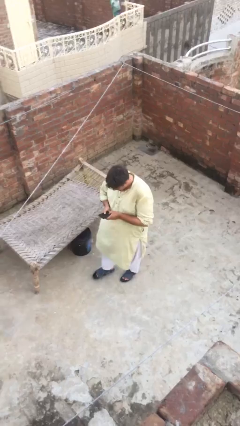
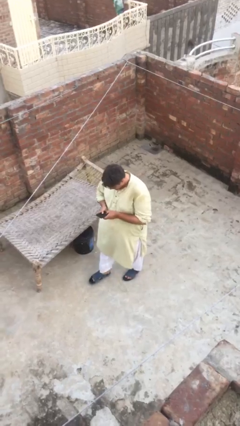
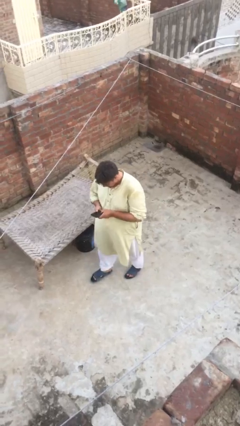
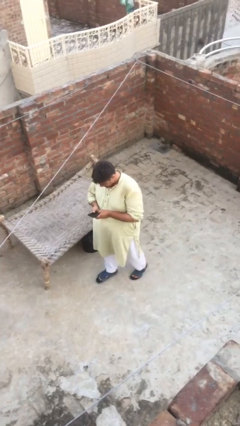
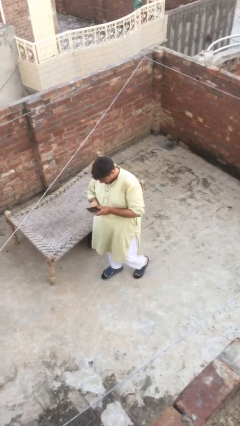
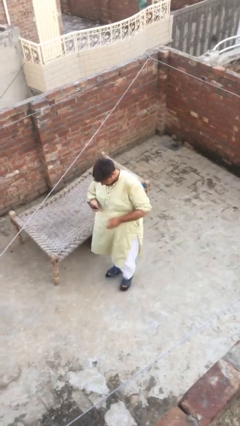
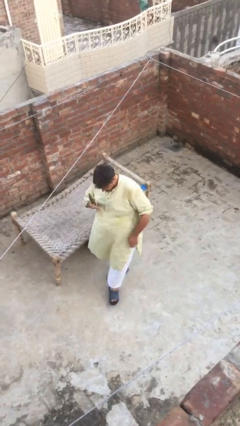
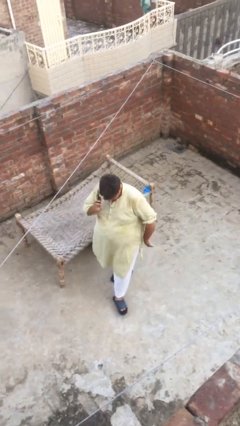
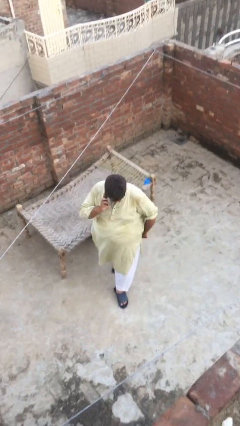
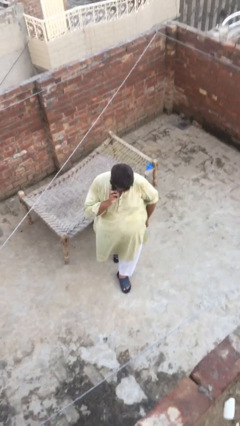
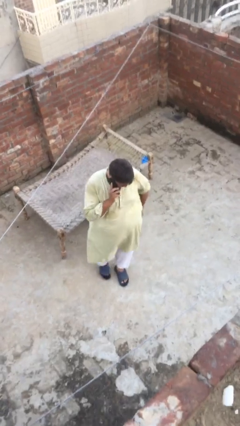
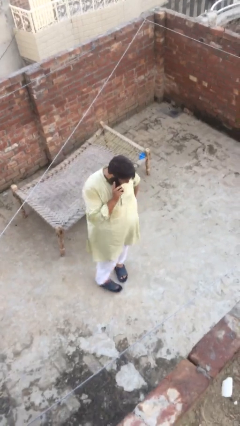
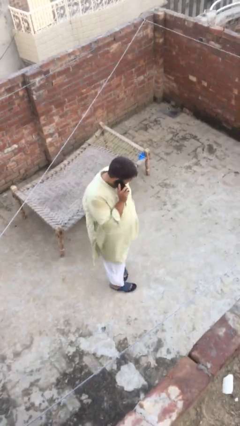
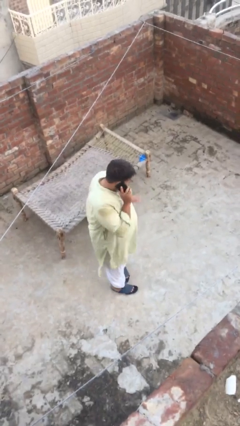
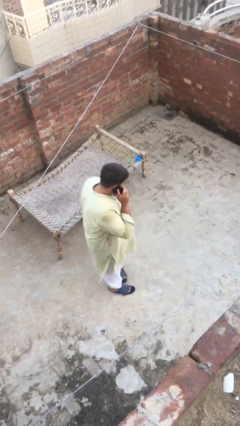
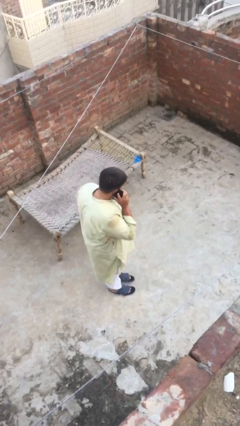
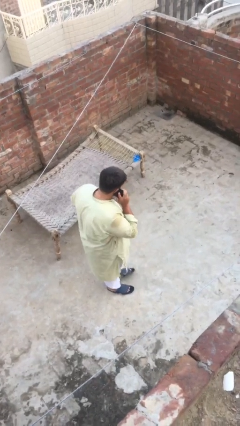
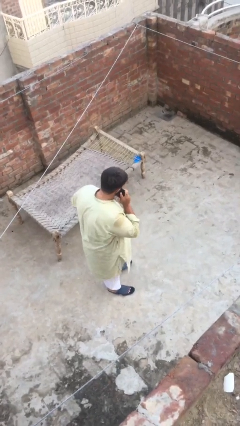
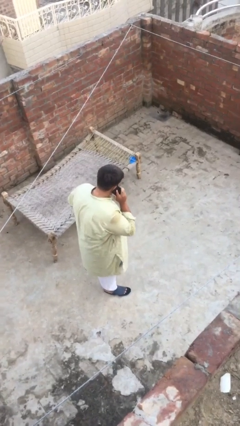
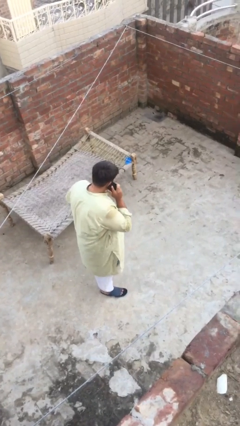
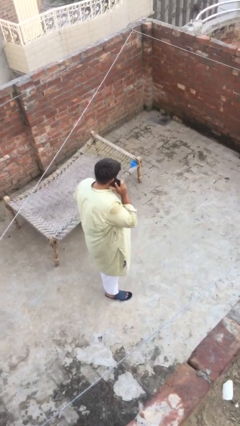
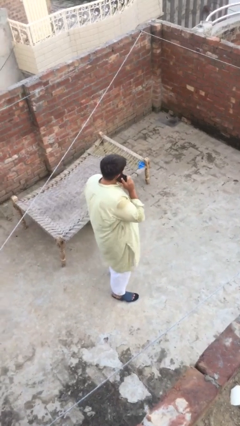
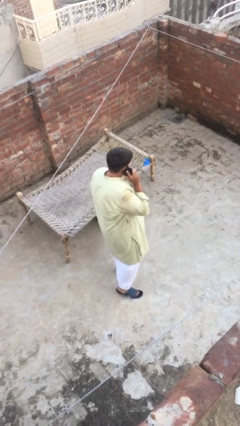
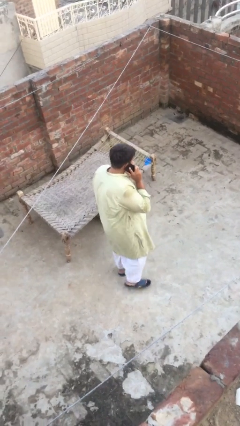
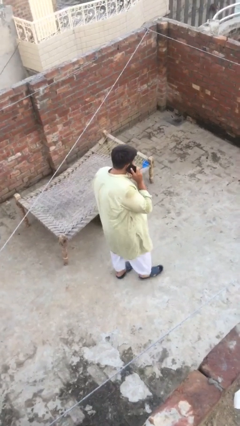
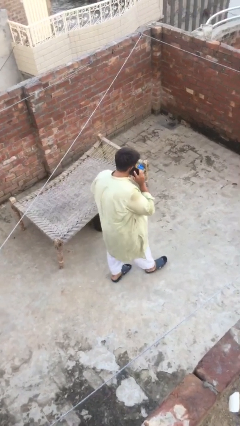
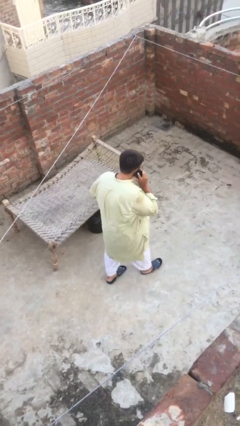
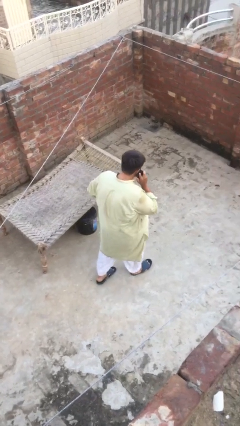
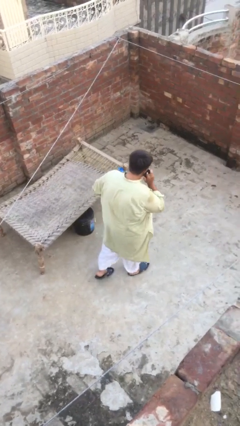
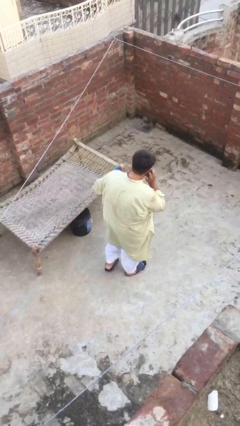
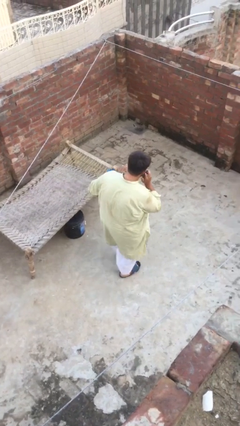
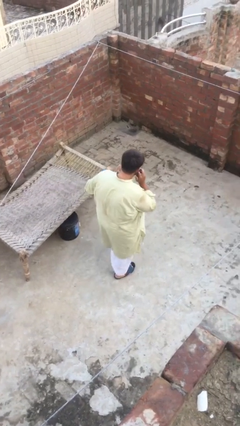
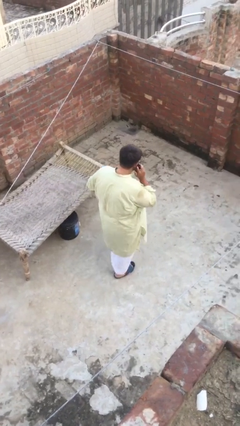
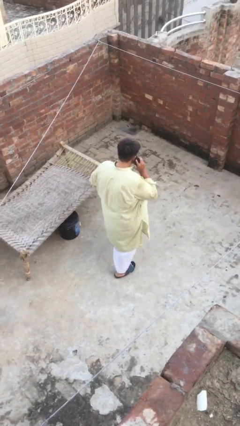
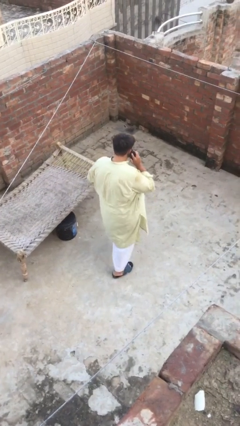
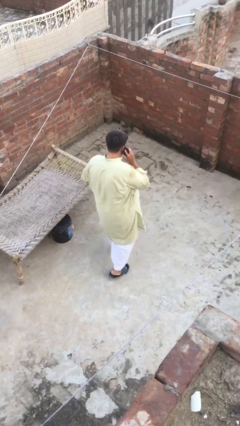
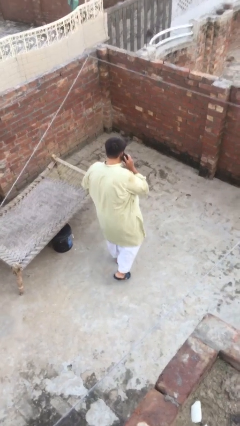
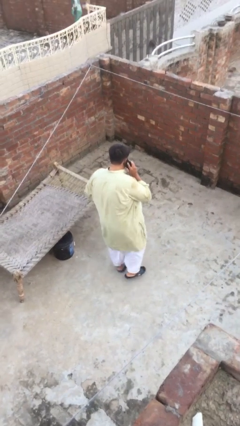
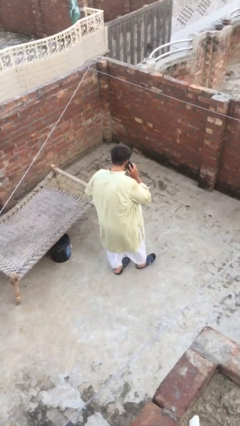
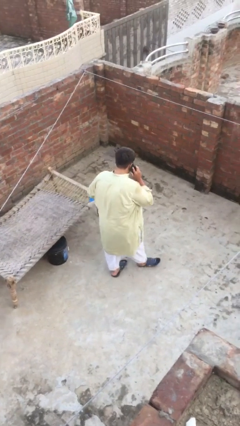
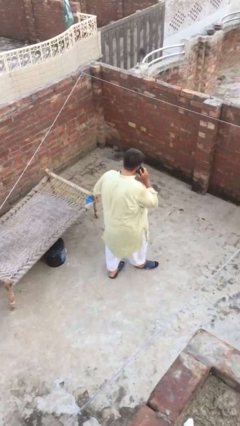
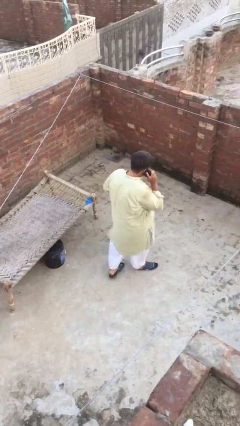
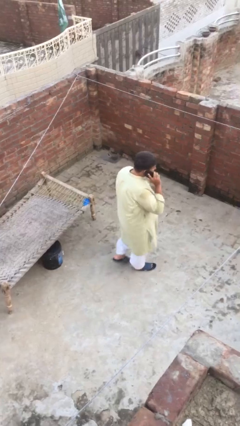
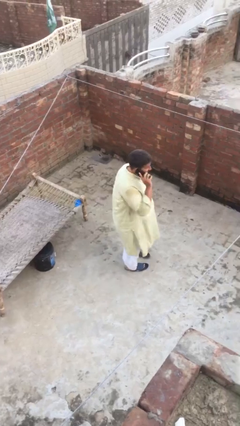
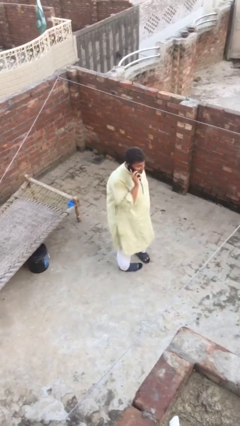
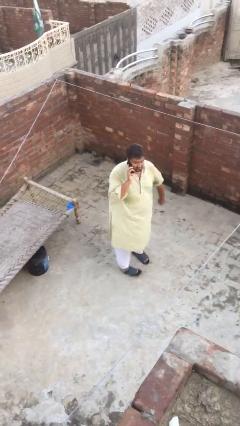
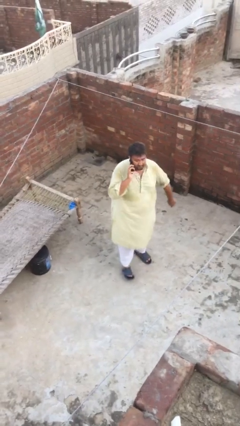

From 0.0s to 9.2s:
person talks on phone

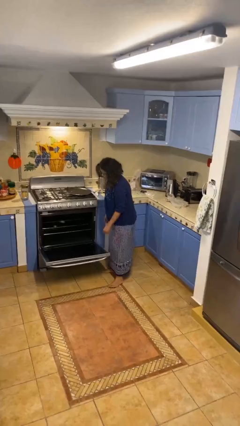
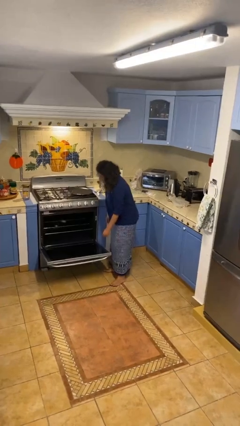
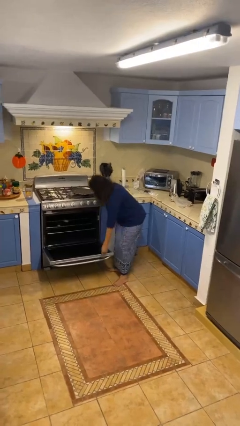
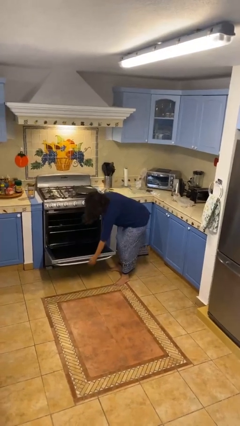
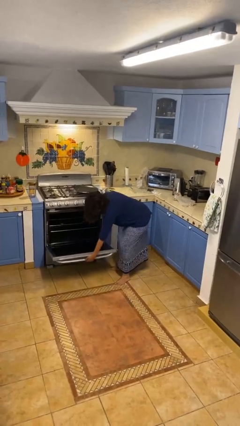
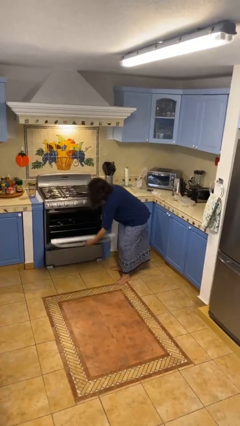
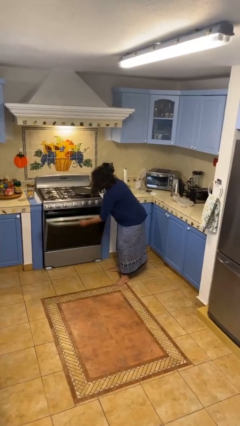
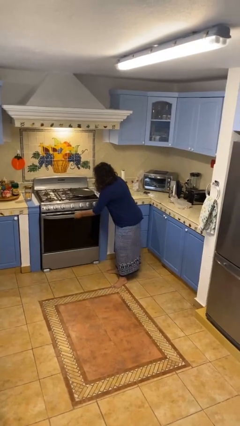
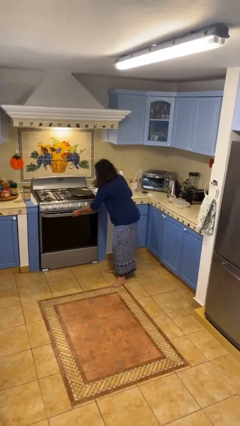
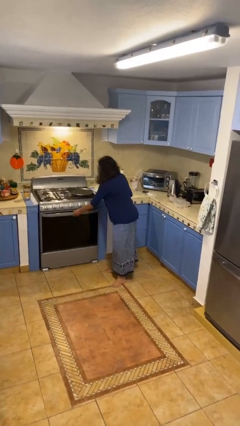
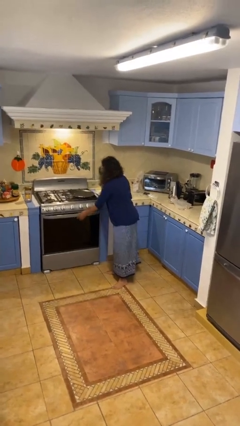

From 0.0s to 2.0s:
person closes oven door

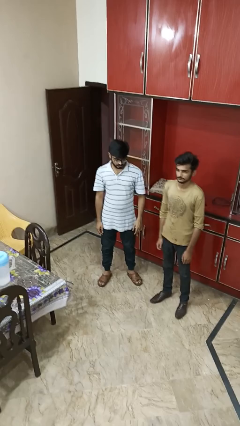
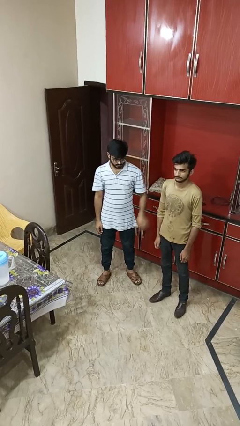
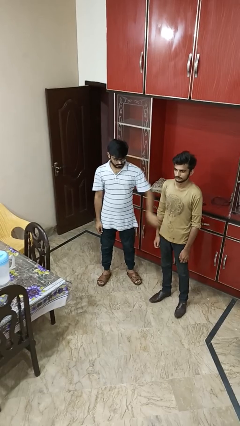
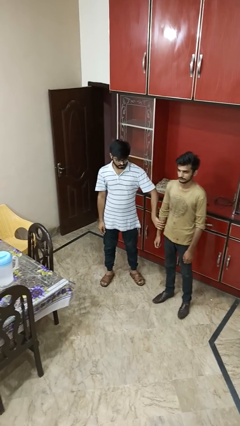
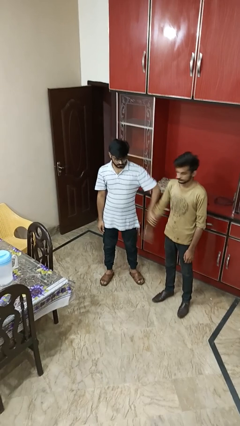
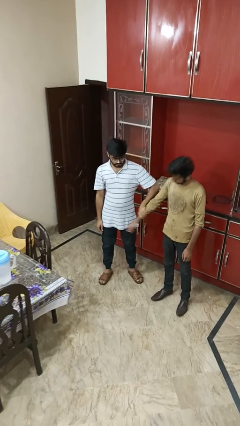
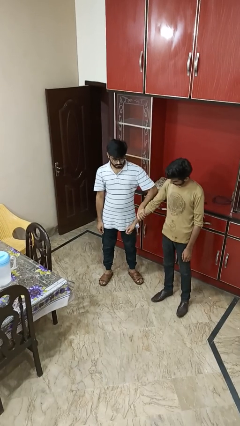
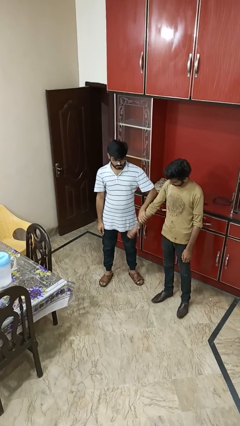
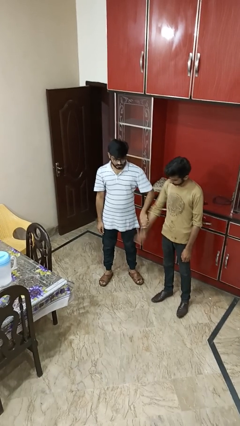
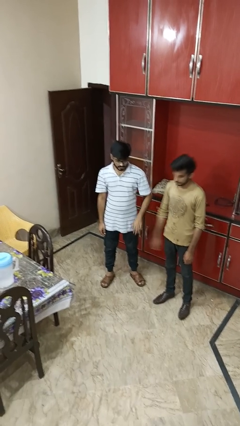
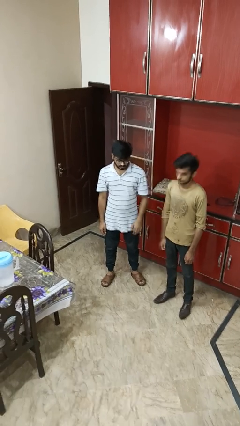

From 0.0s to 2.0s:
person grabs person by forearm

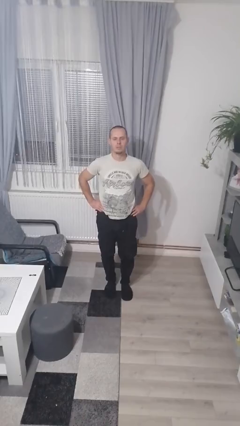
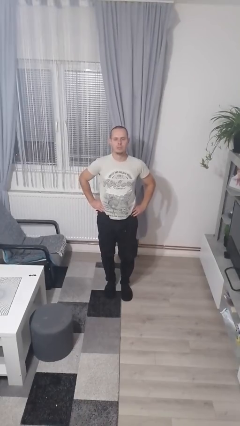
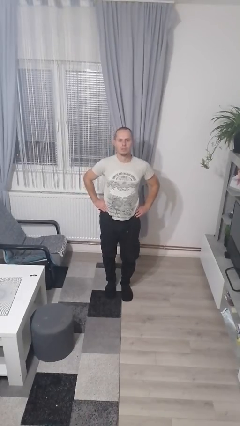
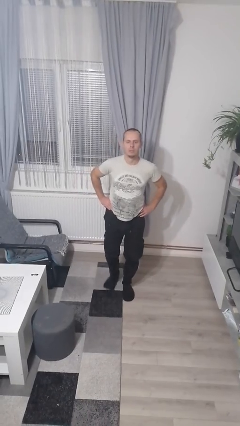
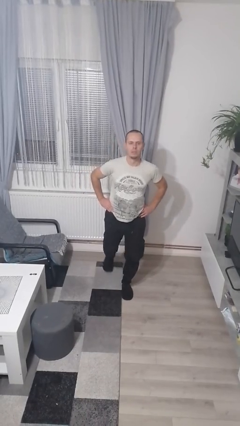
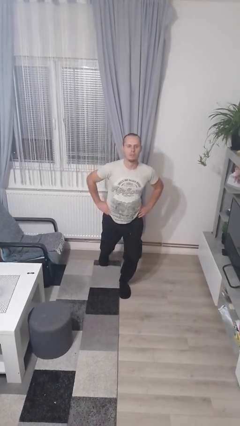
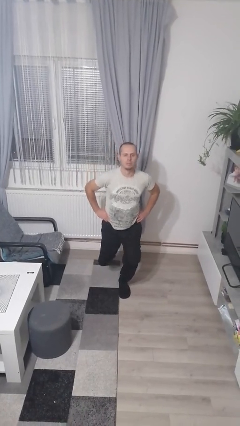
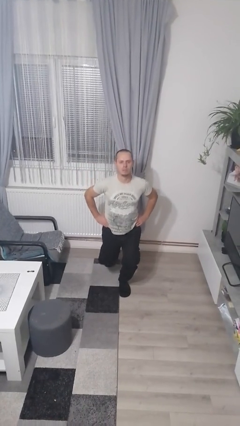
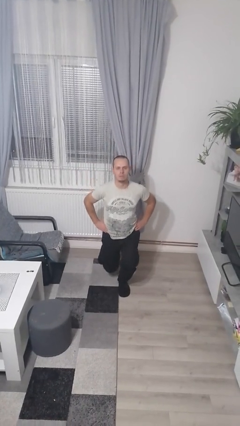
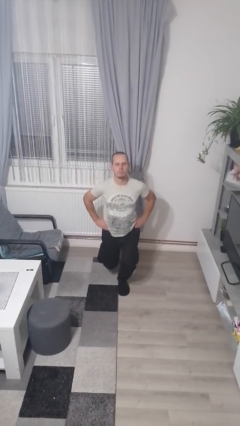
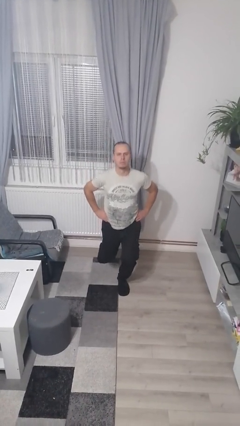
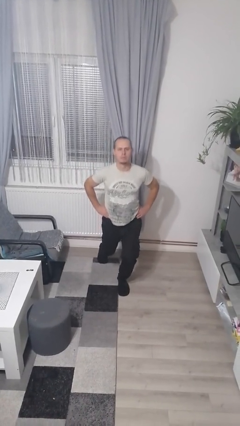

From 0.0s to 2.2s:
person exercises with lunges

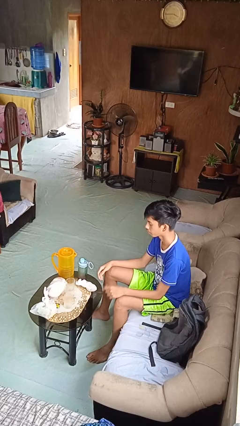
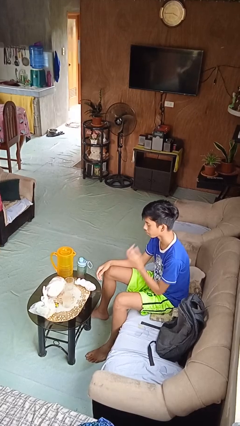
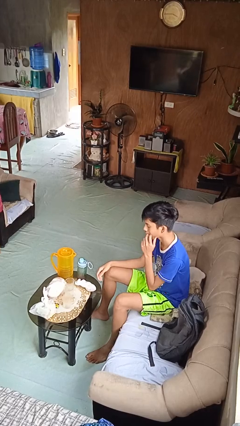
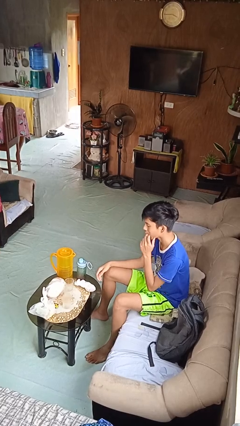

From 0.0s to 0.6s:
person licks fingers

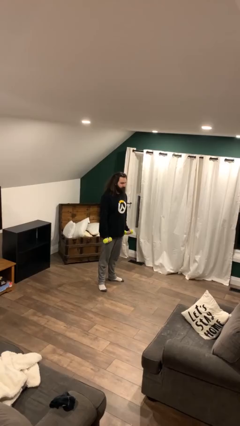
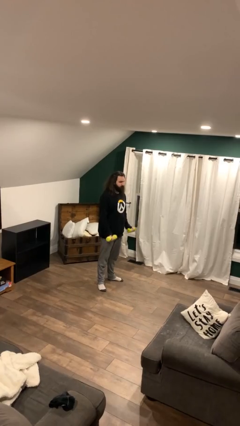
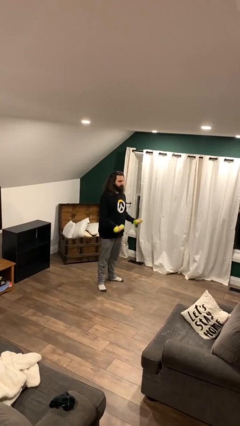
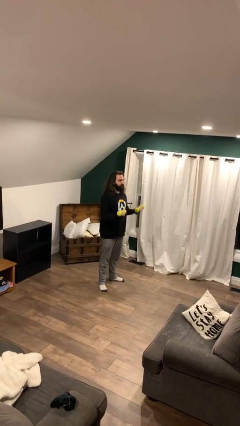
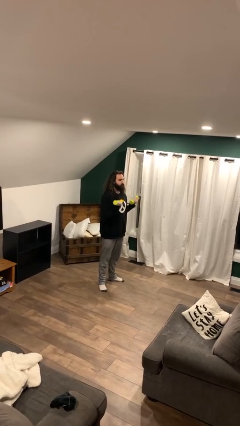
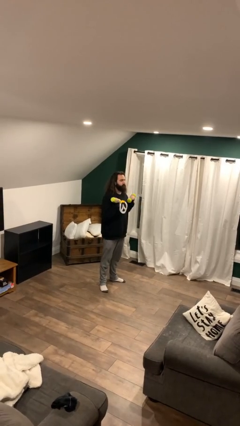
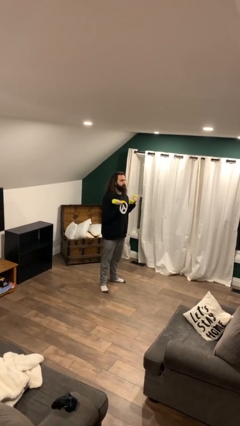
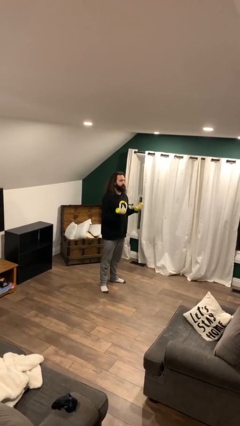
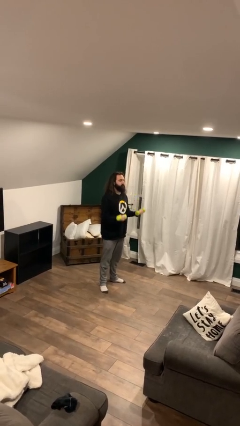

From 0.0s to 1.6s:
person lifts dumbbells
